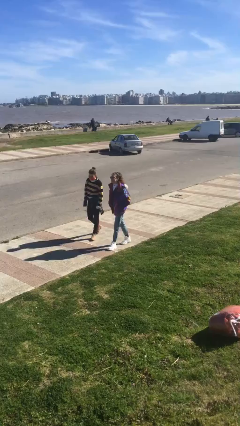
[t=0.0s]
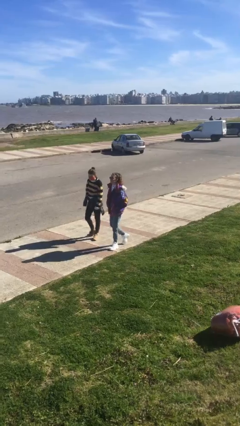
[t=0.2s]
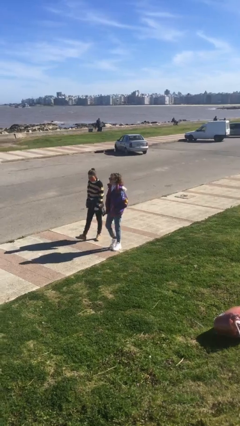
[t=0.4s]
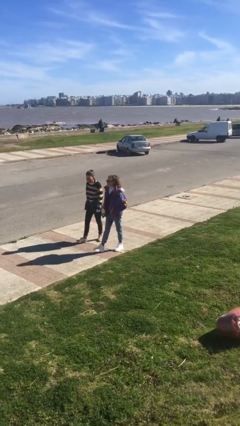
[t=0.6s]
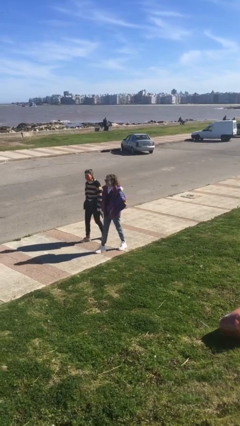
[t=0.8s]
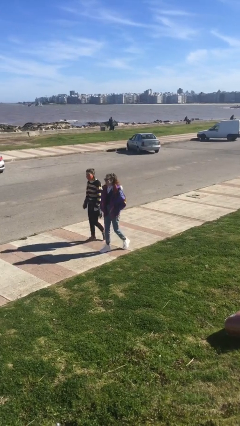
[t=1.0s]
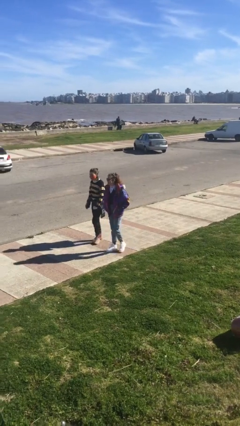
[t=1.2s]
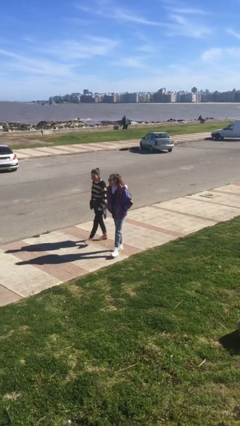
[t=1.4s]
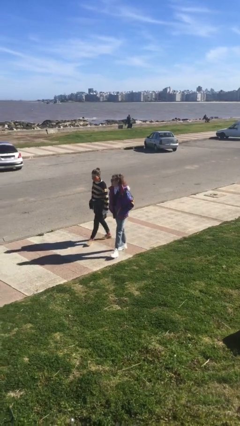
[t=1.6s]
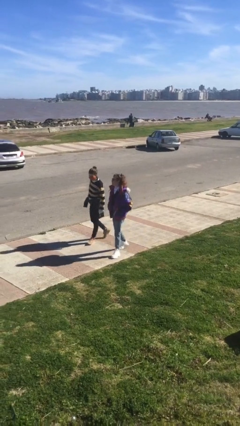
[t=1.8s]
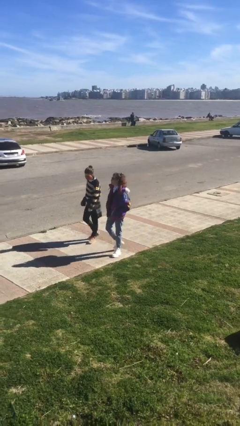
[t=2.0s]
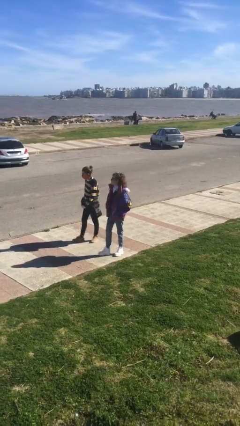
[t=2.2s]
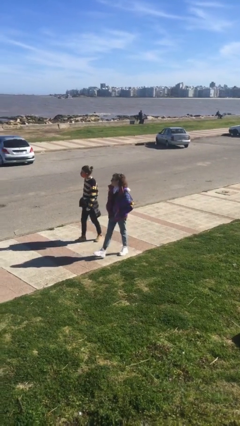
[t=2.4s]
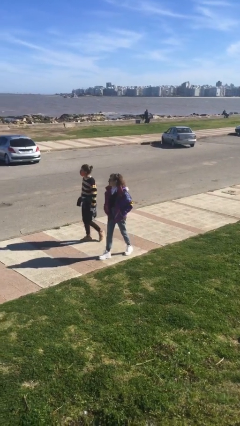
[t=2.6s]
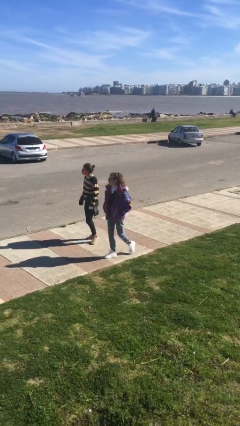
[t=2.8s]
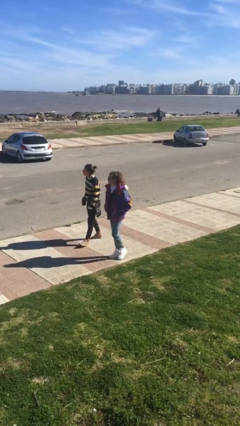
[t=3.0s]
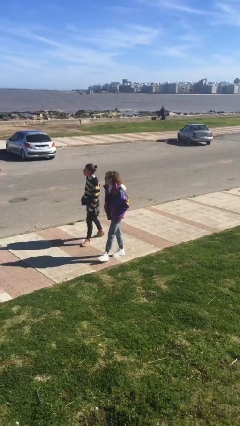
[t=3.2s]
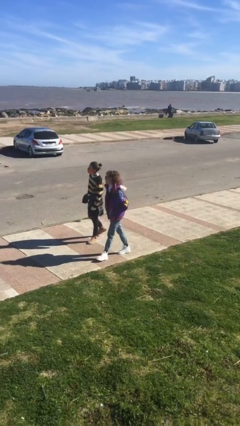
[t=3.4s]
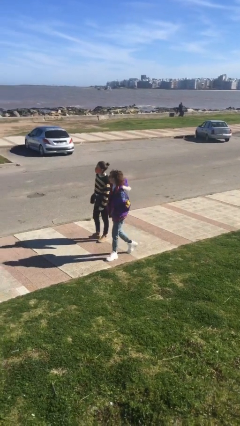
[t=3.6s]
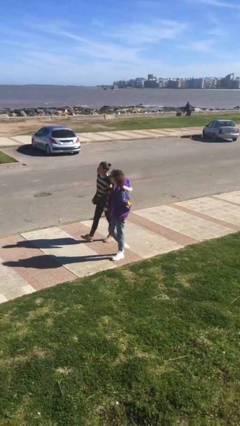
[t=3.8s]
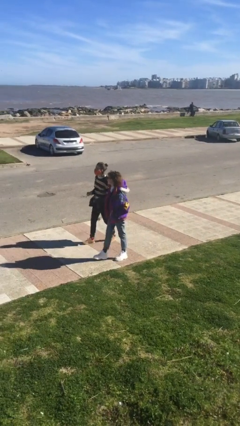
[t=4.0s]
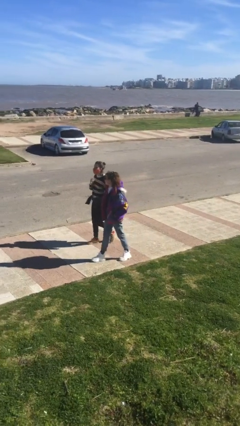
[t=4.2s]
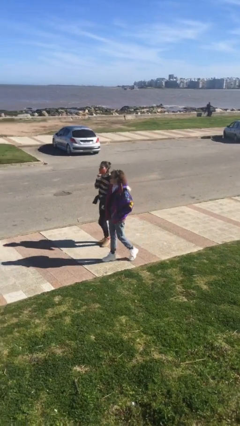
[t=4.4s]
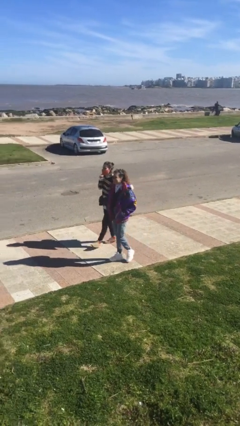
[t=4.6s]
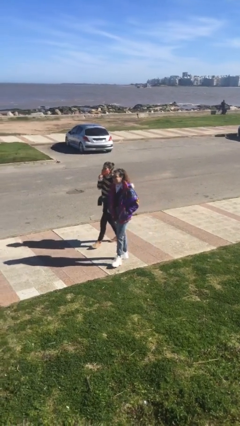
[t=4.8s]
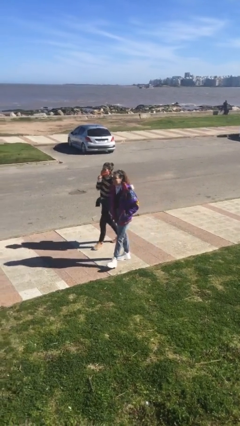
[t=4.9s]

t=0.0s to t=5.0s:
person talks to person

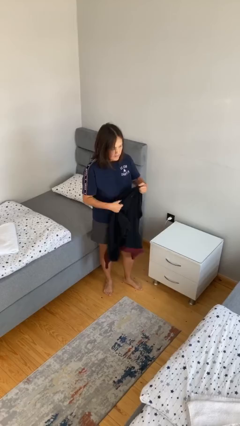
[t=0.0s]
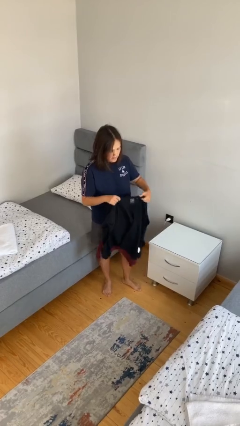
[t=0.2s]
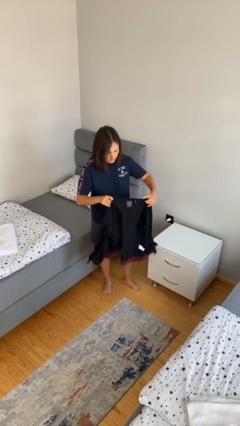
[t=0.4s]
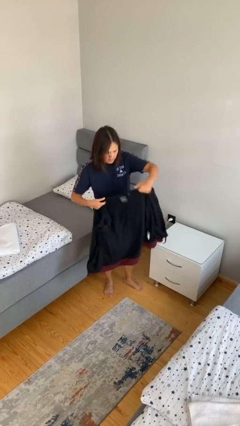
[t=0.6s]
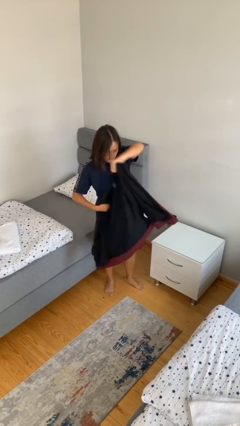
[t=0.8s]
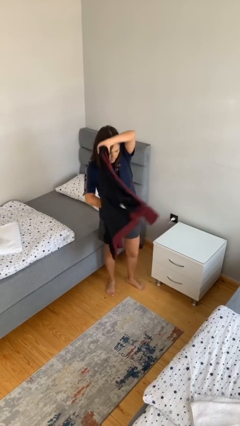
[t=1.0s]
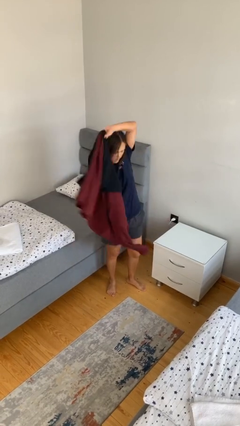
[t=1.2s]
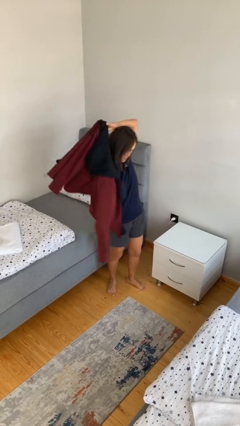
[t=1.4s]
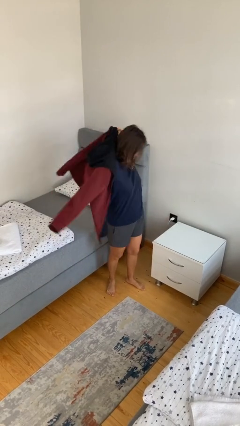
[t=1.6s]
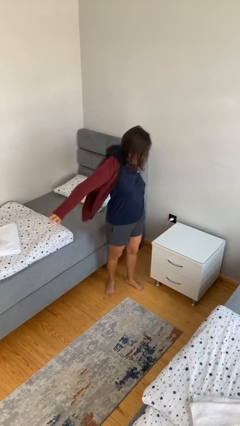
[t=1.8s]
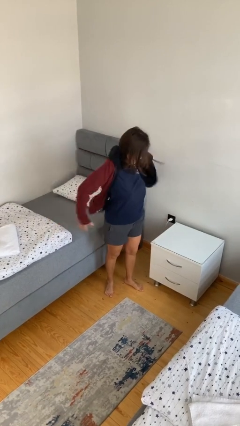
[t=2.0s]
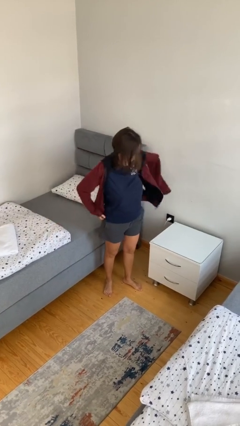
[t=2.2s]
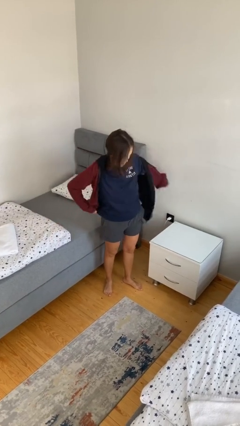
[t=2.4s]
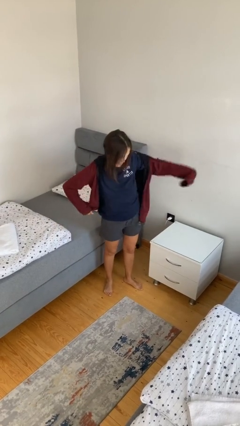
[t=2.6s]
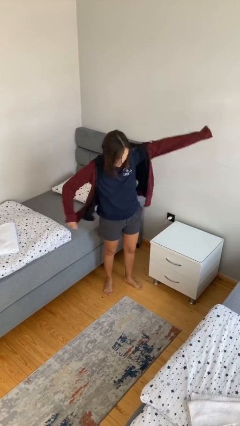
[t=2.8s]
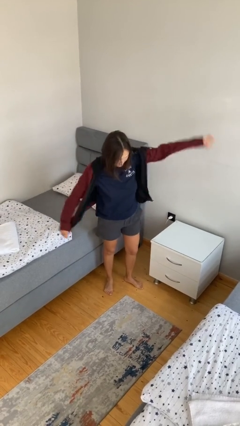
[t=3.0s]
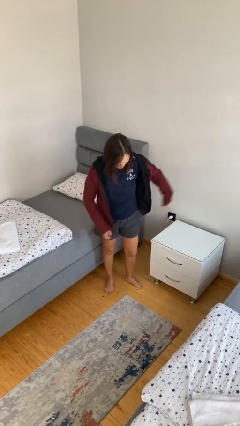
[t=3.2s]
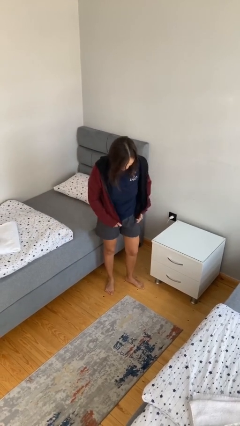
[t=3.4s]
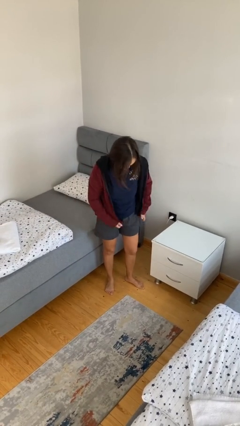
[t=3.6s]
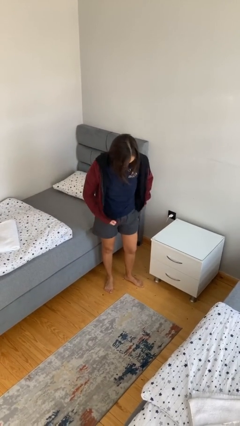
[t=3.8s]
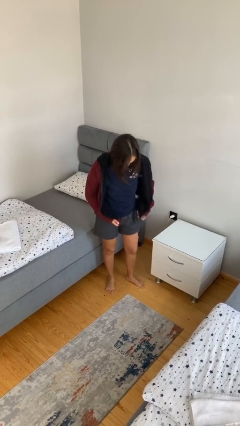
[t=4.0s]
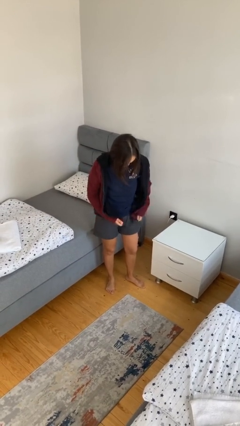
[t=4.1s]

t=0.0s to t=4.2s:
person puts on jacket

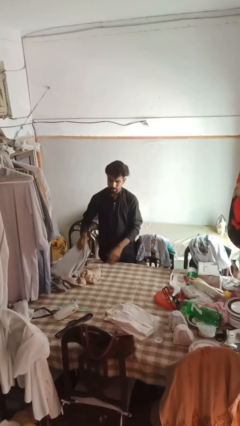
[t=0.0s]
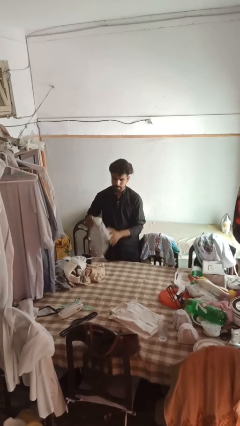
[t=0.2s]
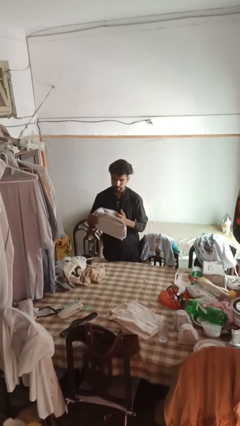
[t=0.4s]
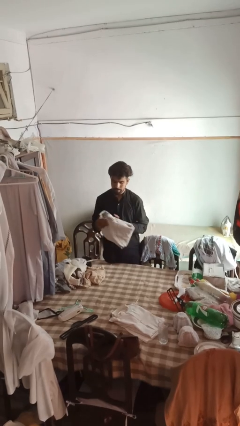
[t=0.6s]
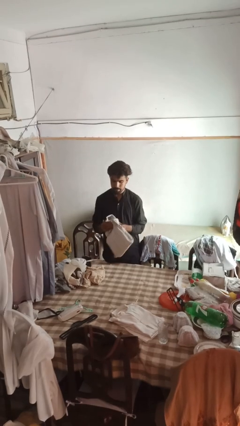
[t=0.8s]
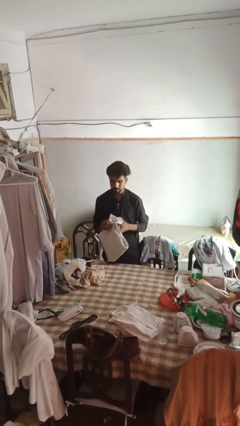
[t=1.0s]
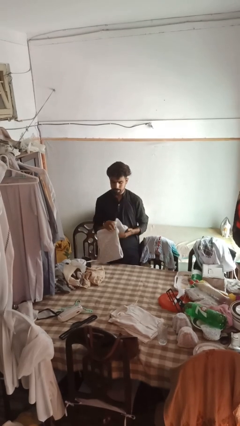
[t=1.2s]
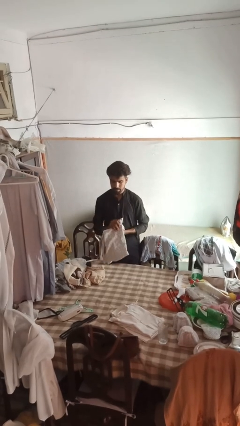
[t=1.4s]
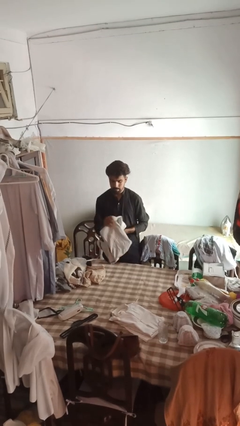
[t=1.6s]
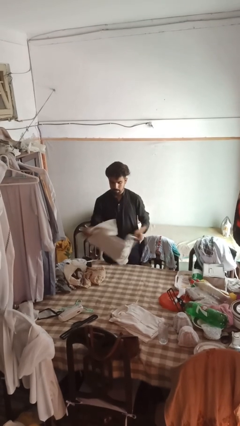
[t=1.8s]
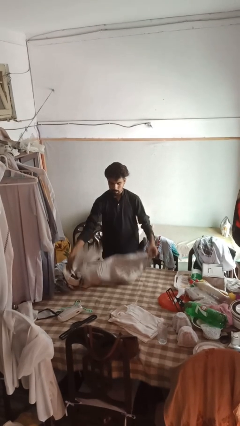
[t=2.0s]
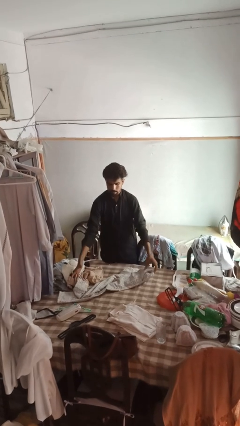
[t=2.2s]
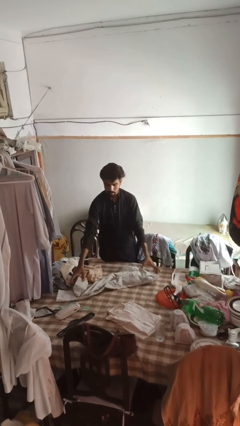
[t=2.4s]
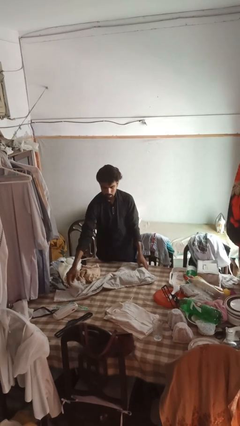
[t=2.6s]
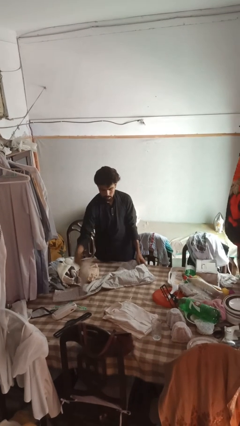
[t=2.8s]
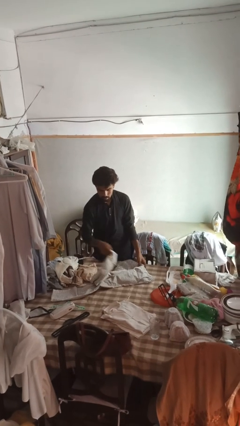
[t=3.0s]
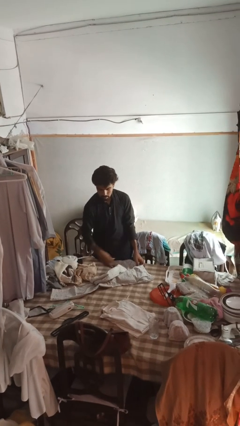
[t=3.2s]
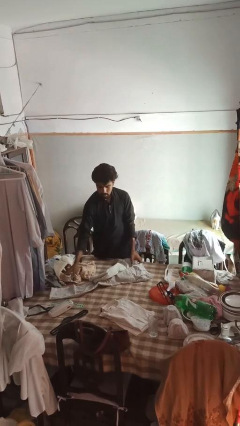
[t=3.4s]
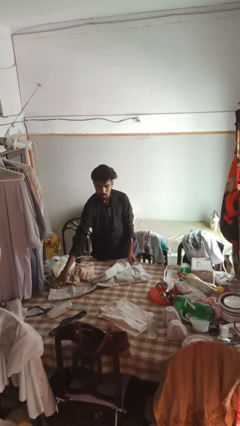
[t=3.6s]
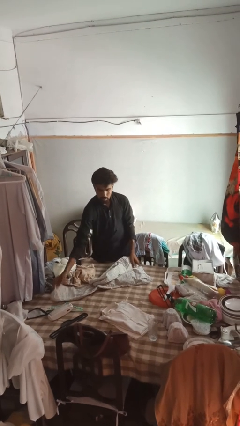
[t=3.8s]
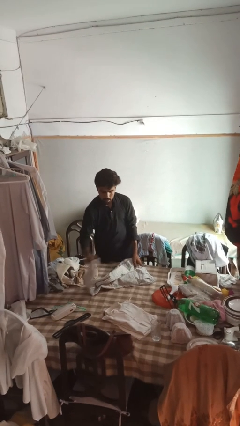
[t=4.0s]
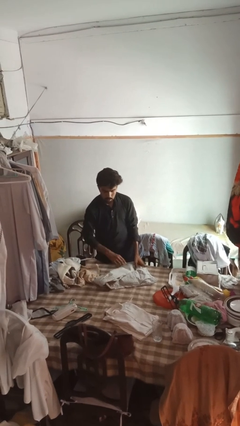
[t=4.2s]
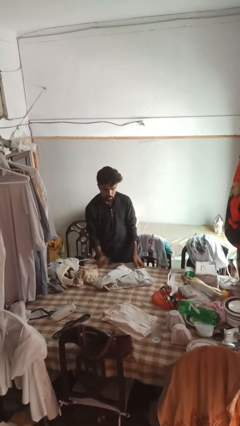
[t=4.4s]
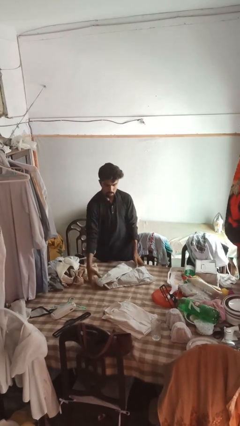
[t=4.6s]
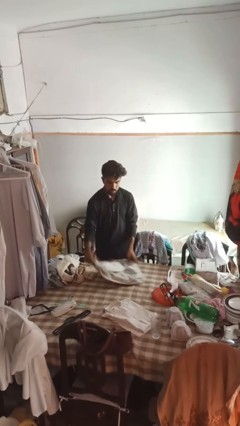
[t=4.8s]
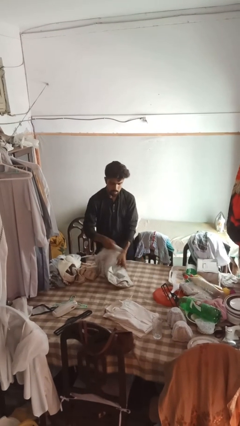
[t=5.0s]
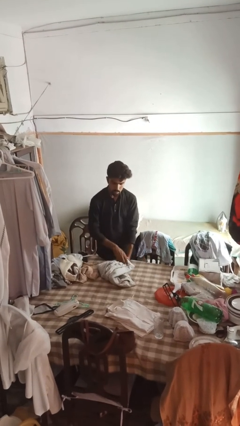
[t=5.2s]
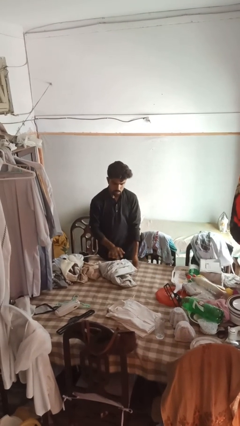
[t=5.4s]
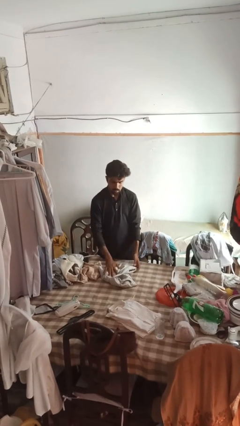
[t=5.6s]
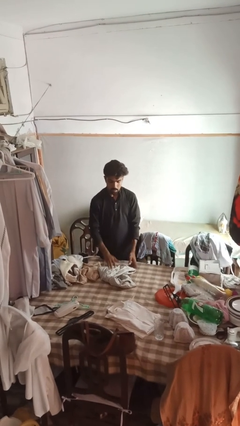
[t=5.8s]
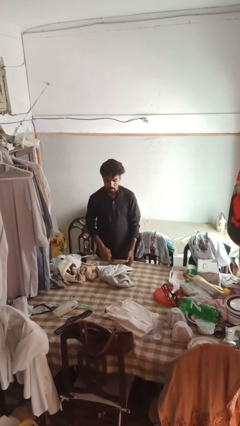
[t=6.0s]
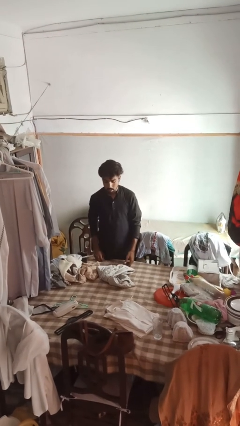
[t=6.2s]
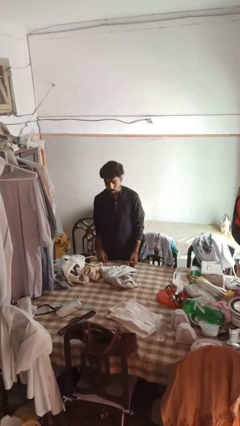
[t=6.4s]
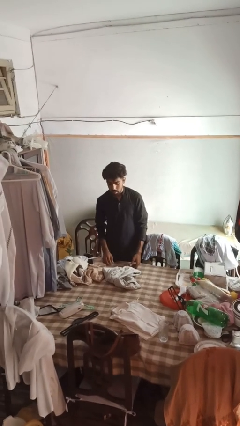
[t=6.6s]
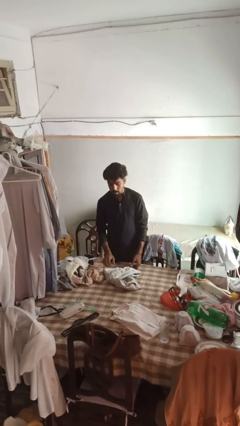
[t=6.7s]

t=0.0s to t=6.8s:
person folds socks

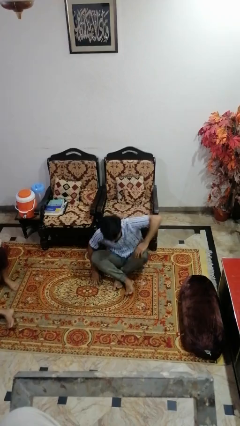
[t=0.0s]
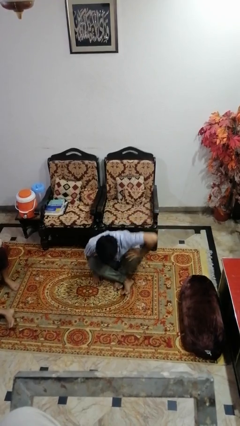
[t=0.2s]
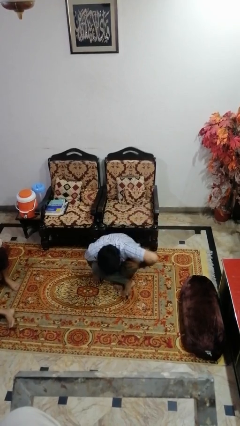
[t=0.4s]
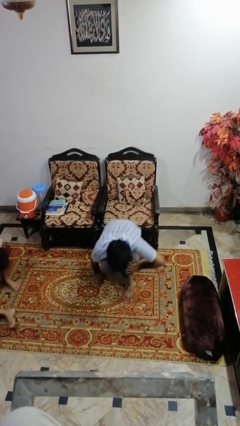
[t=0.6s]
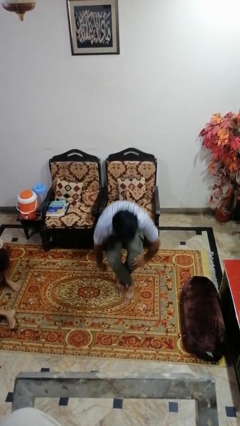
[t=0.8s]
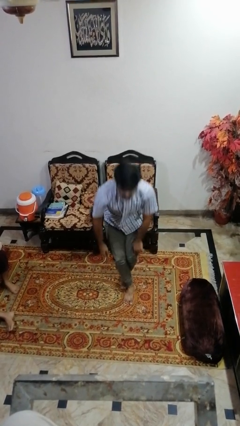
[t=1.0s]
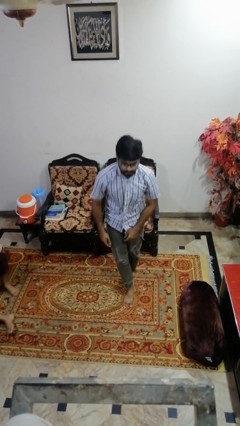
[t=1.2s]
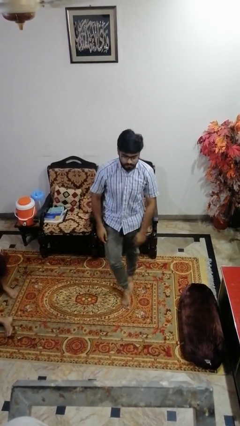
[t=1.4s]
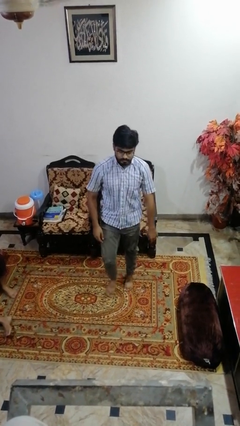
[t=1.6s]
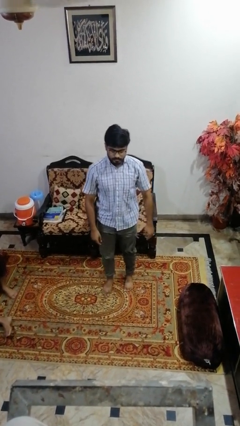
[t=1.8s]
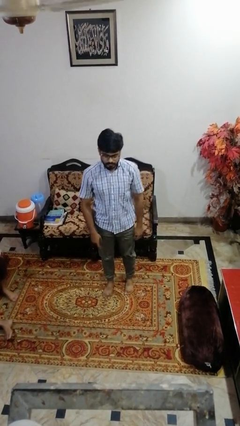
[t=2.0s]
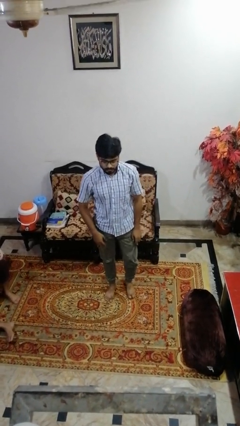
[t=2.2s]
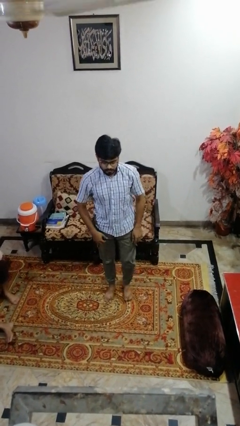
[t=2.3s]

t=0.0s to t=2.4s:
person stands up from floor
